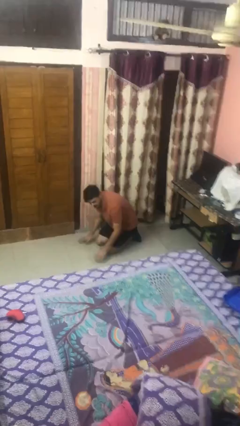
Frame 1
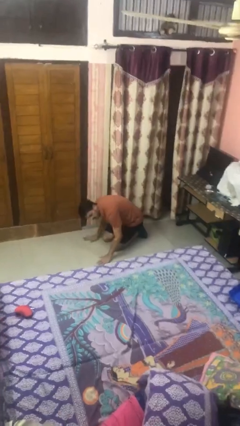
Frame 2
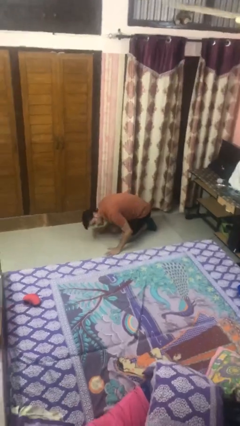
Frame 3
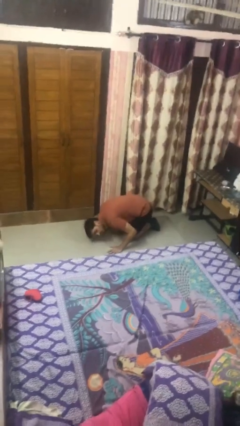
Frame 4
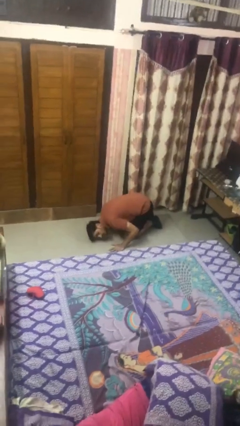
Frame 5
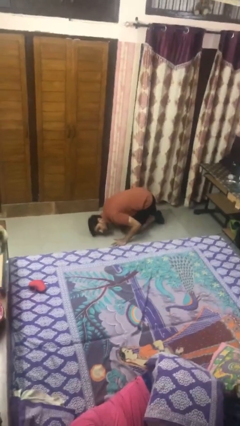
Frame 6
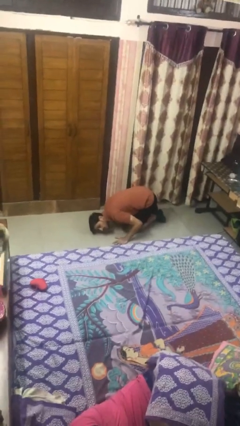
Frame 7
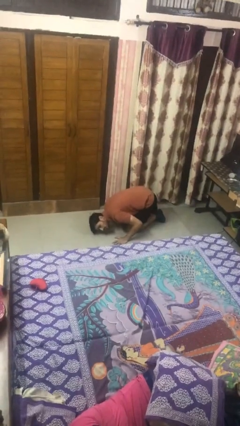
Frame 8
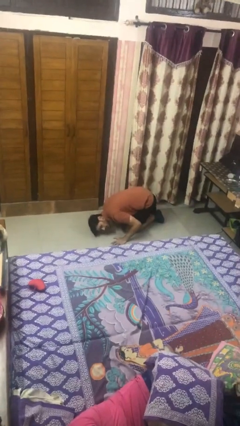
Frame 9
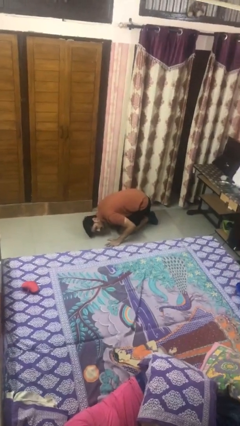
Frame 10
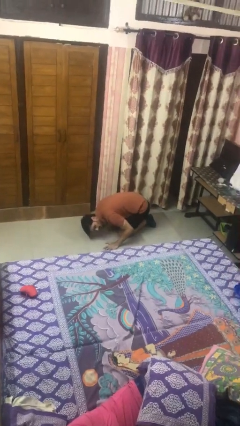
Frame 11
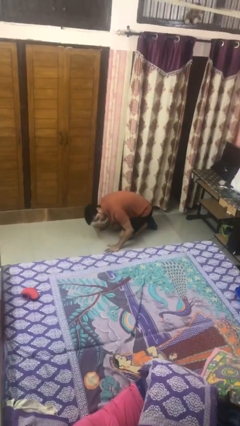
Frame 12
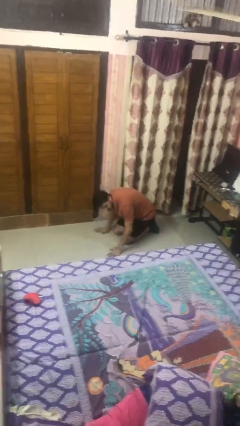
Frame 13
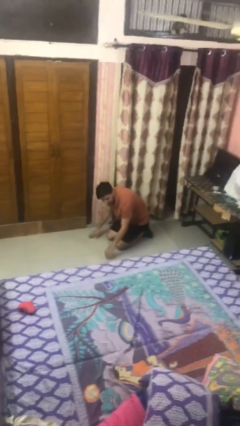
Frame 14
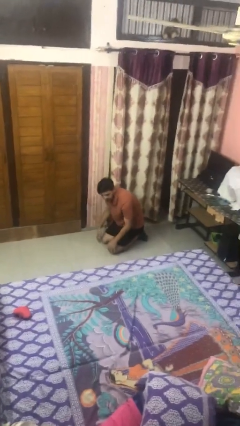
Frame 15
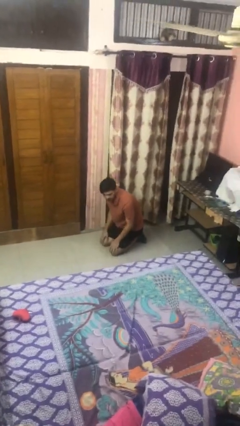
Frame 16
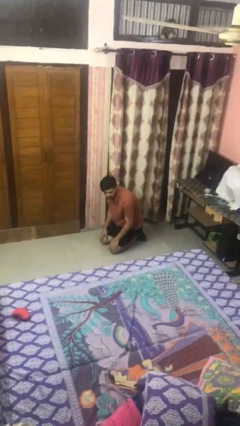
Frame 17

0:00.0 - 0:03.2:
person searches under bed

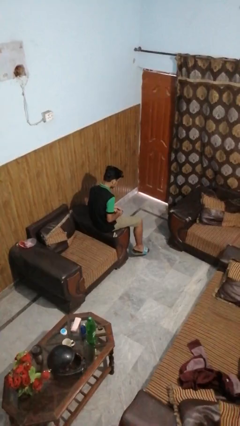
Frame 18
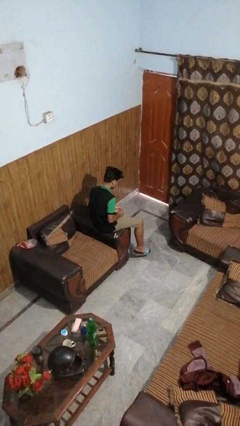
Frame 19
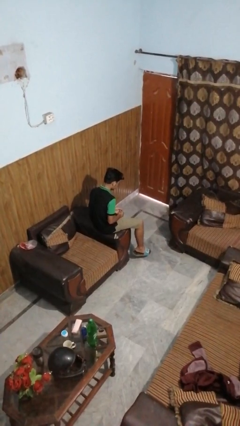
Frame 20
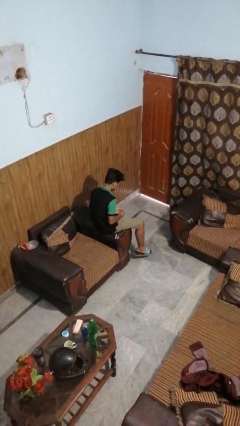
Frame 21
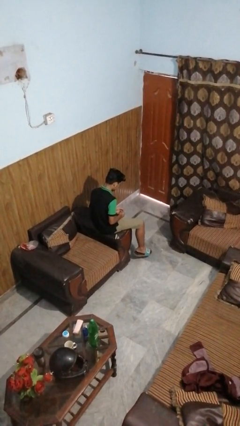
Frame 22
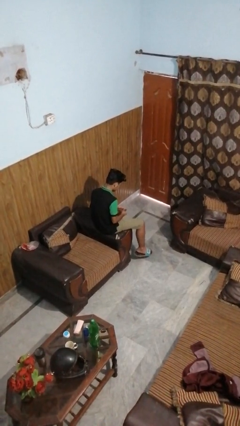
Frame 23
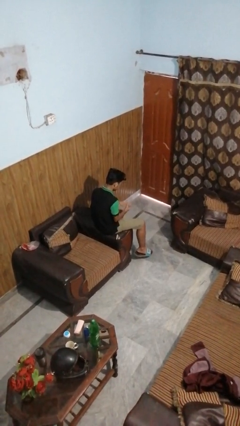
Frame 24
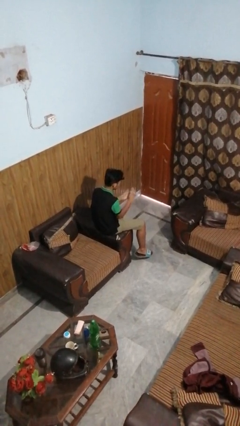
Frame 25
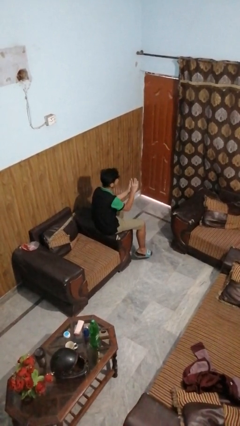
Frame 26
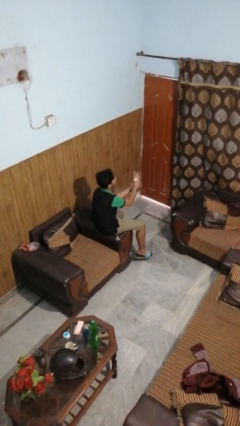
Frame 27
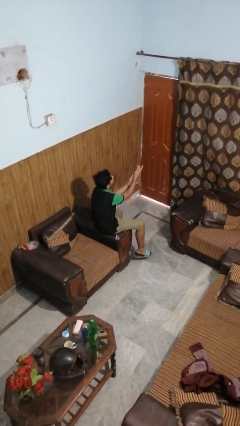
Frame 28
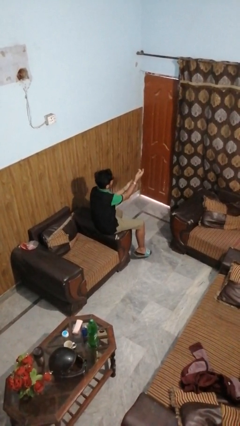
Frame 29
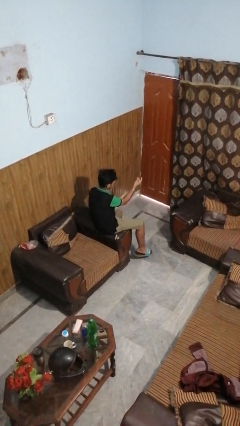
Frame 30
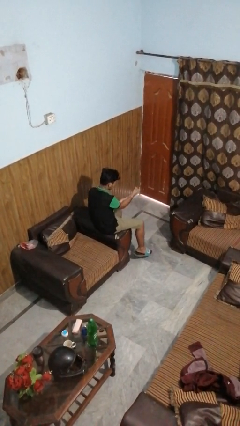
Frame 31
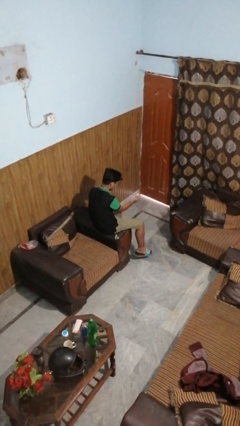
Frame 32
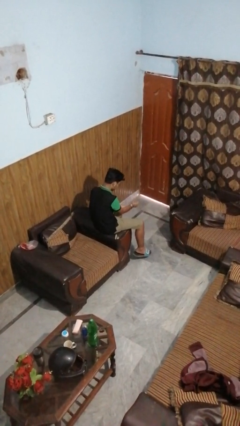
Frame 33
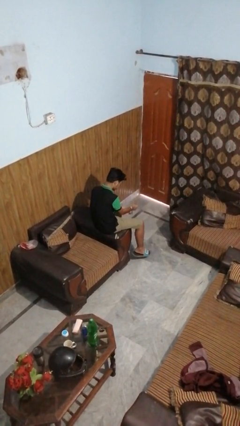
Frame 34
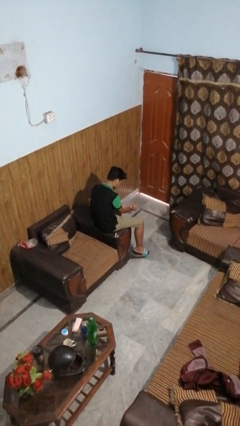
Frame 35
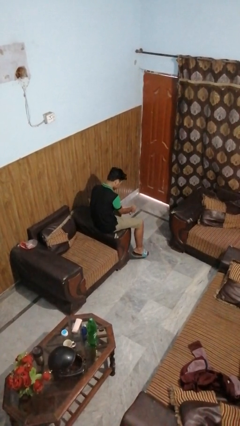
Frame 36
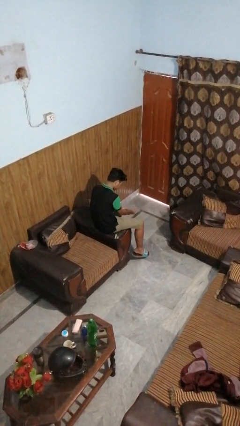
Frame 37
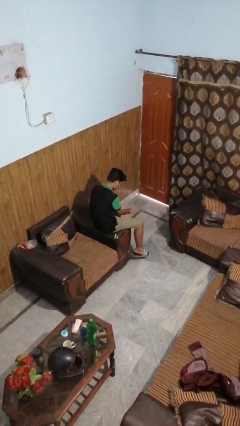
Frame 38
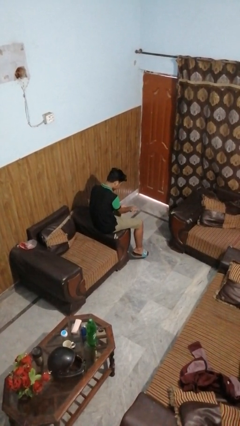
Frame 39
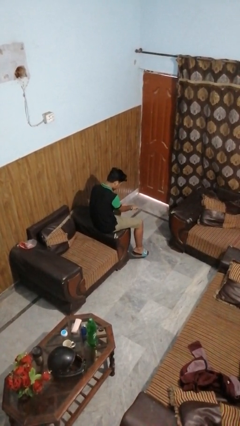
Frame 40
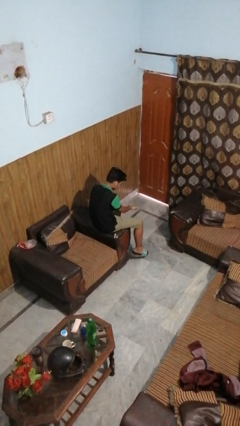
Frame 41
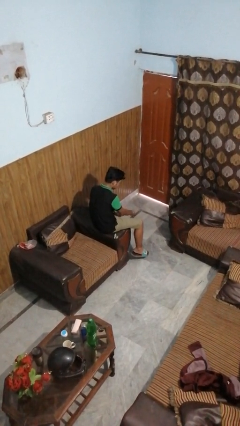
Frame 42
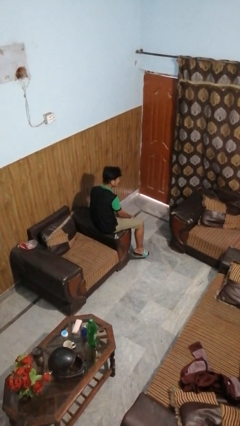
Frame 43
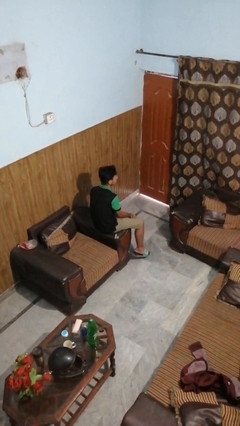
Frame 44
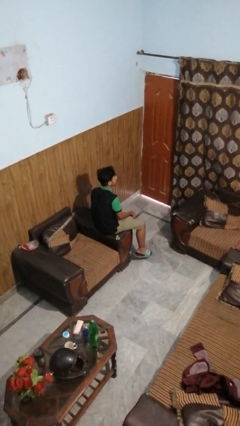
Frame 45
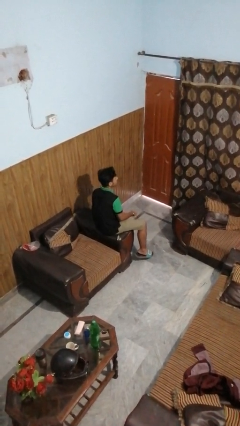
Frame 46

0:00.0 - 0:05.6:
person puts on wristwatch

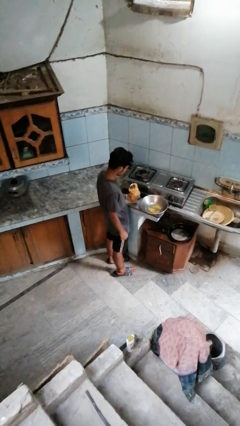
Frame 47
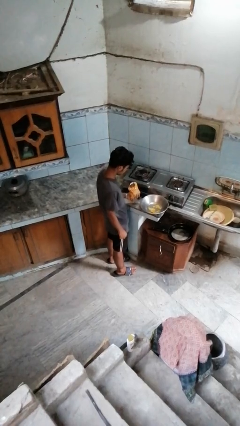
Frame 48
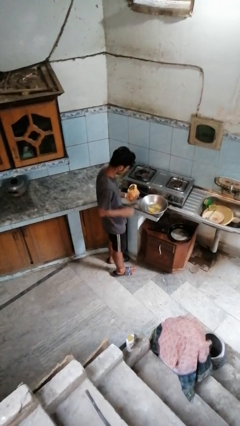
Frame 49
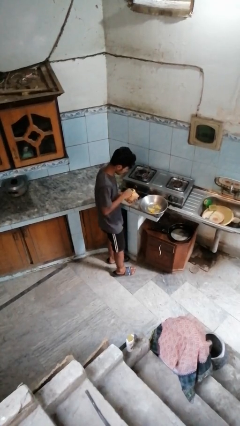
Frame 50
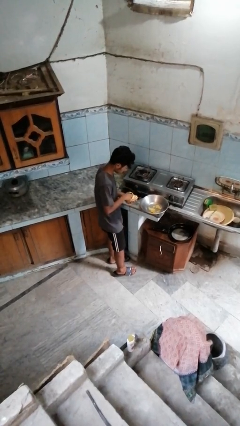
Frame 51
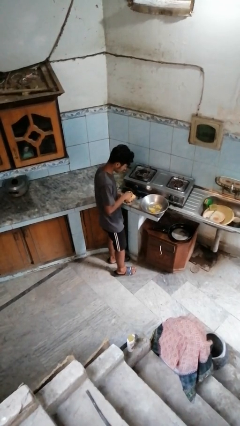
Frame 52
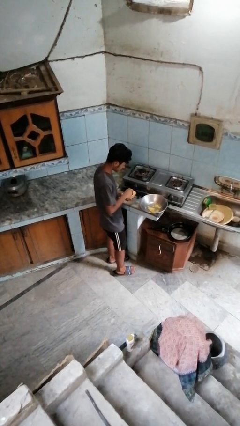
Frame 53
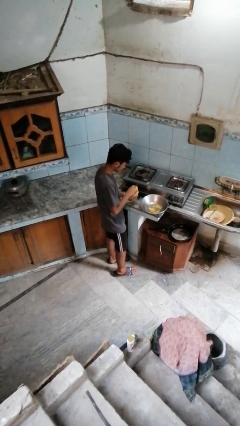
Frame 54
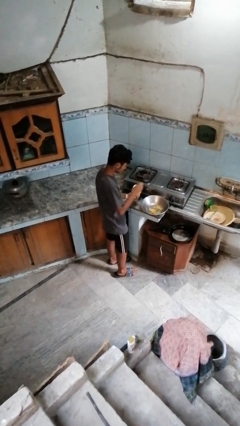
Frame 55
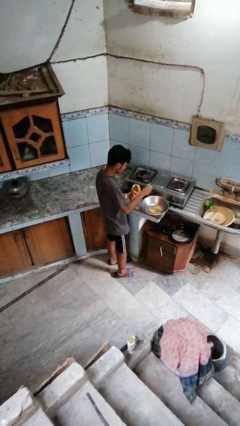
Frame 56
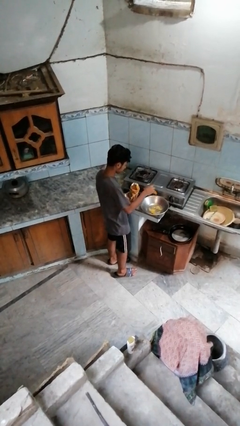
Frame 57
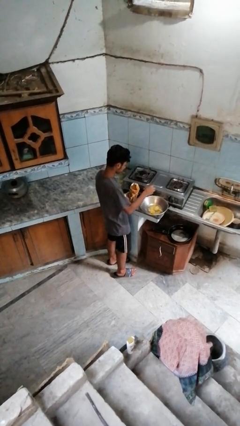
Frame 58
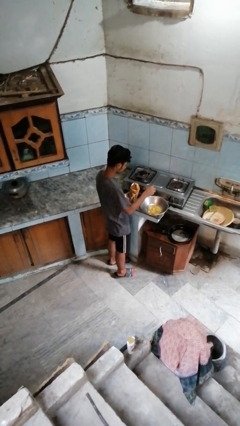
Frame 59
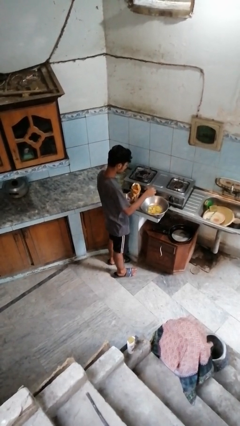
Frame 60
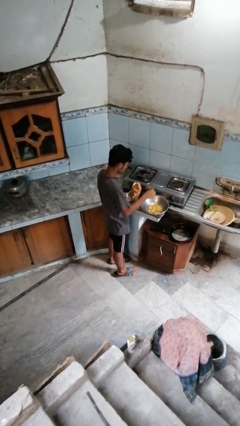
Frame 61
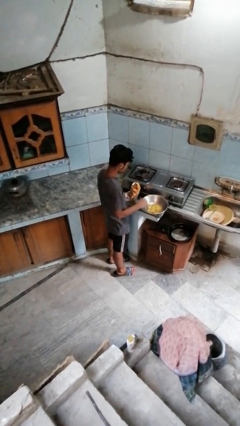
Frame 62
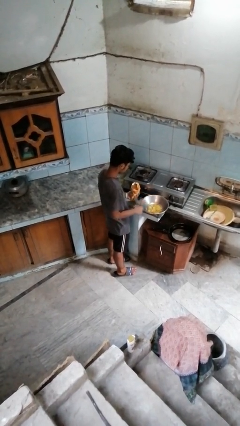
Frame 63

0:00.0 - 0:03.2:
person pours into bowl

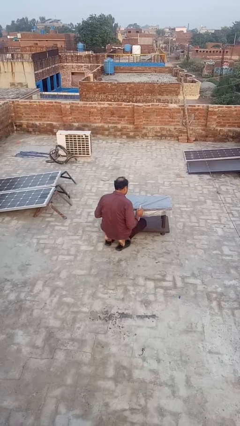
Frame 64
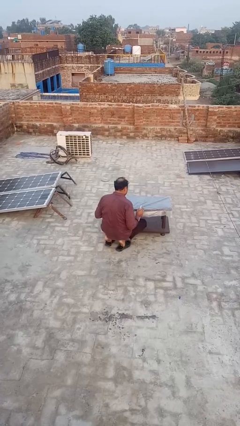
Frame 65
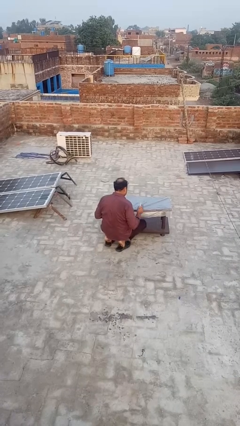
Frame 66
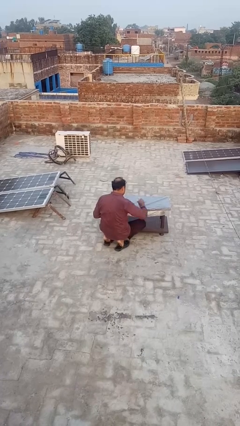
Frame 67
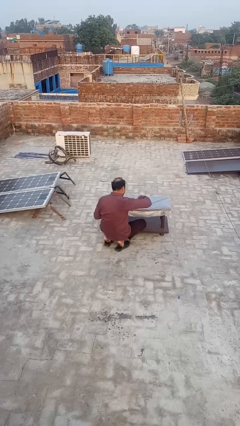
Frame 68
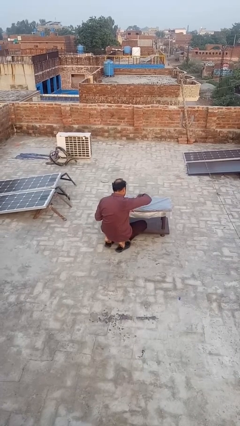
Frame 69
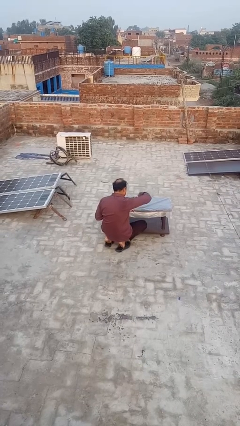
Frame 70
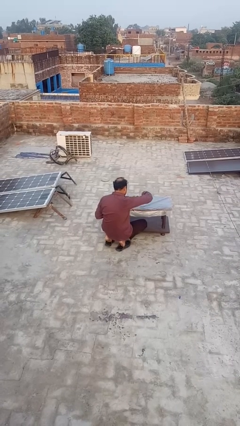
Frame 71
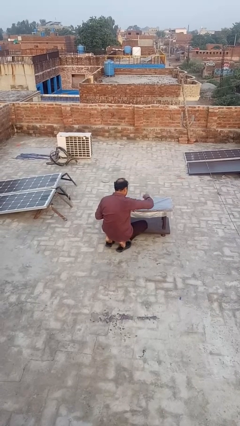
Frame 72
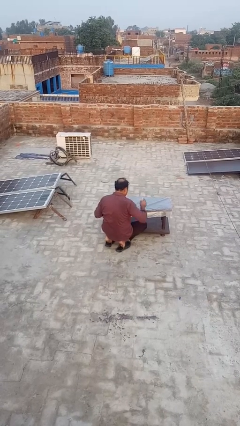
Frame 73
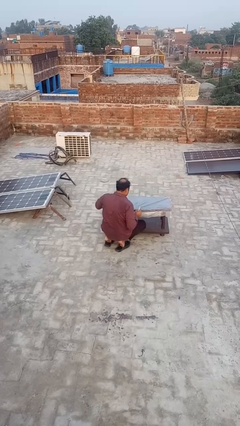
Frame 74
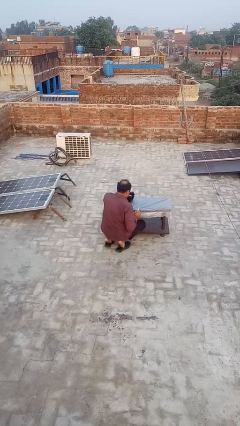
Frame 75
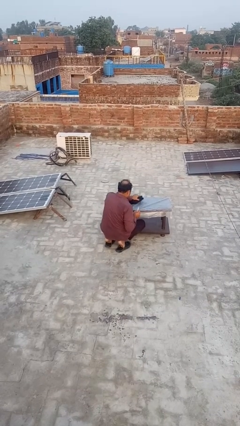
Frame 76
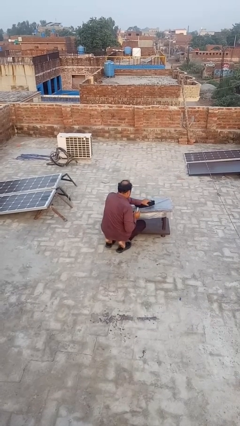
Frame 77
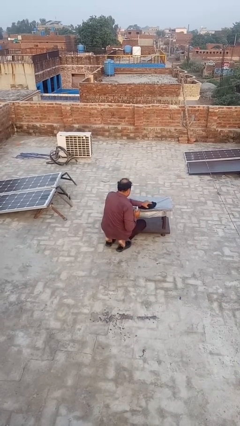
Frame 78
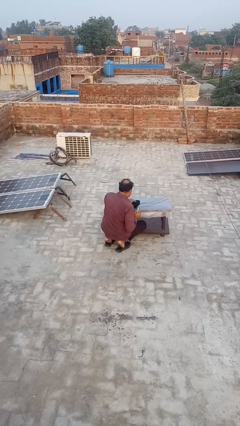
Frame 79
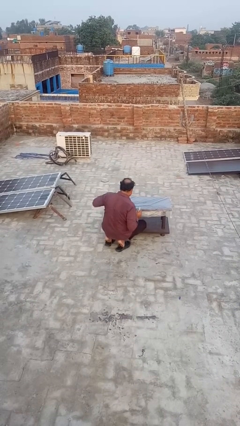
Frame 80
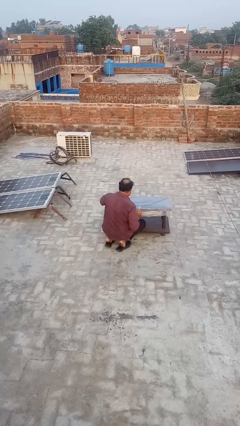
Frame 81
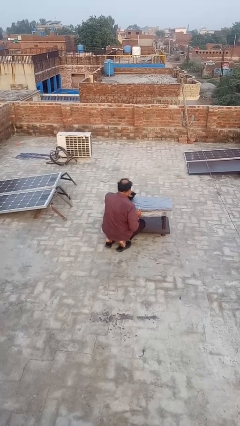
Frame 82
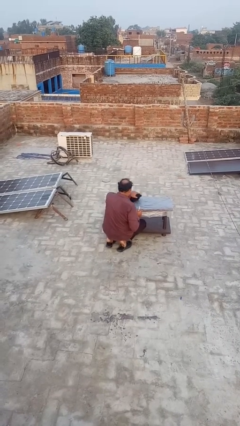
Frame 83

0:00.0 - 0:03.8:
person sprays from bottle

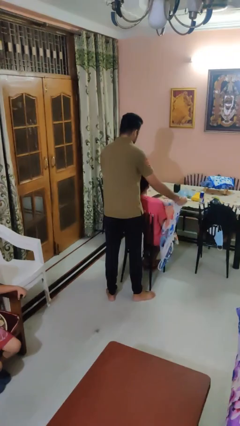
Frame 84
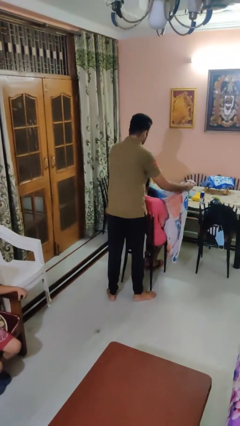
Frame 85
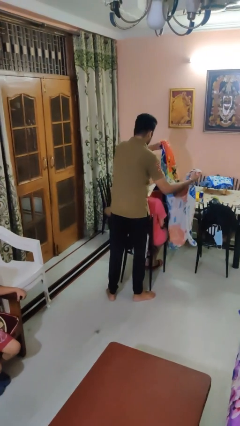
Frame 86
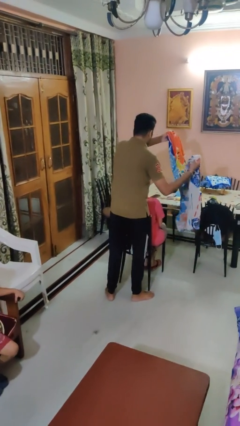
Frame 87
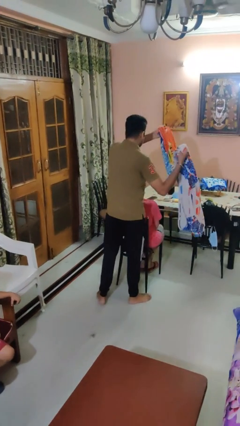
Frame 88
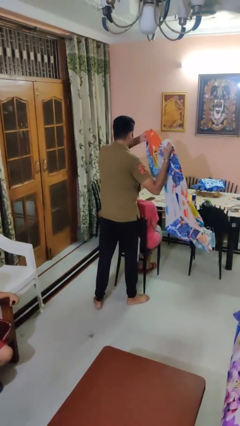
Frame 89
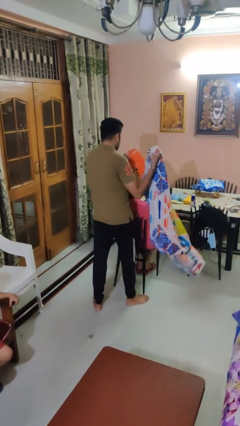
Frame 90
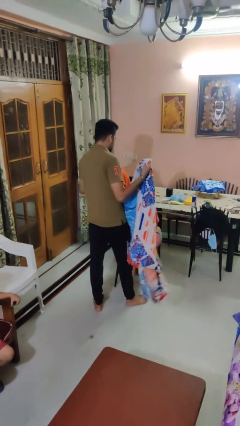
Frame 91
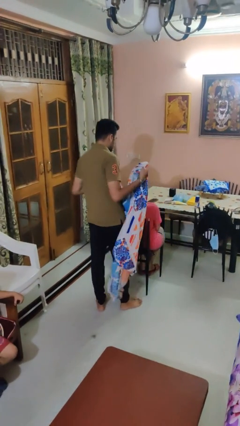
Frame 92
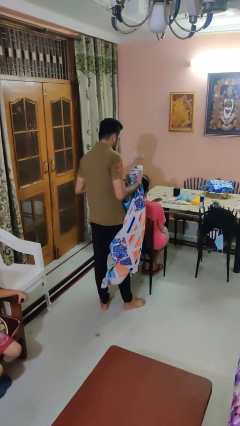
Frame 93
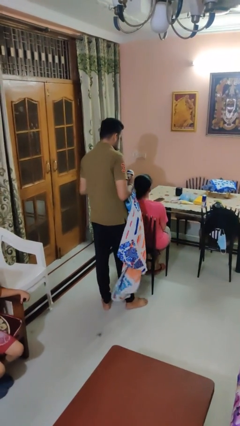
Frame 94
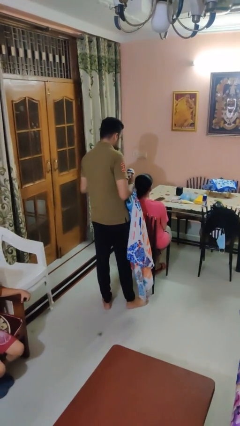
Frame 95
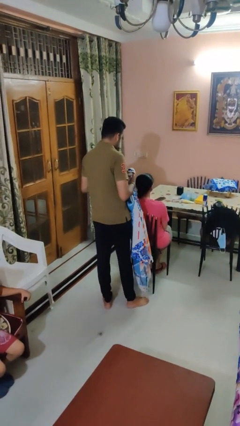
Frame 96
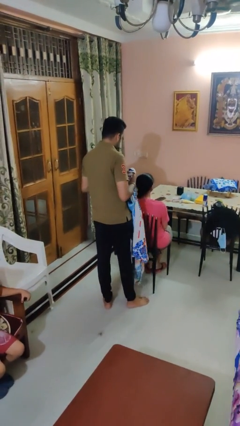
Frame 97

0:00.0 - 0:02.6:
person uncovers friend with blanket
